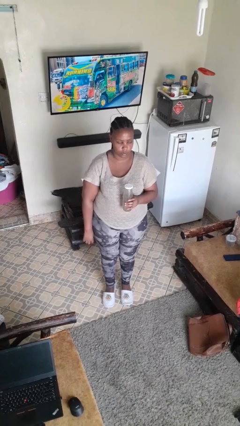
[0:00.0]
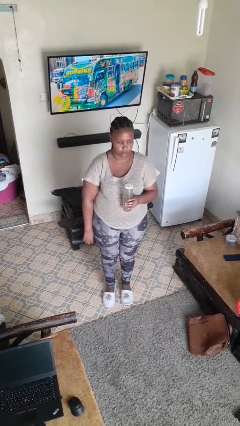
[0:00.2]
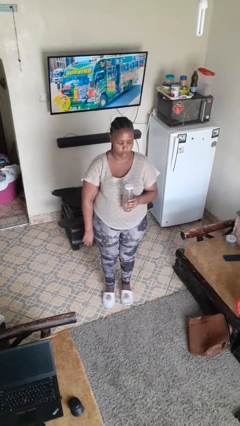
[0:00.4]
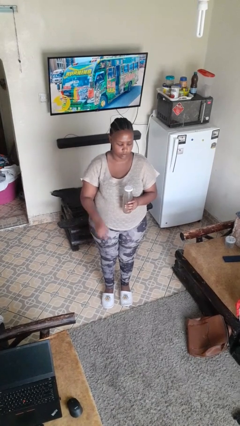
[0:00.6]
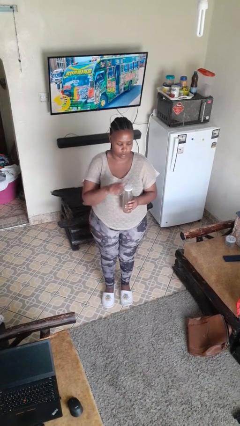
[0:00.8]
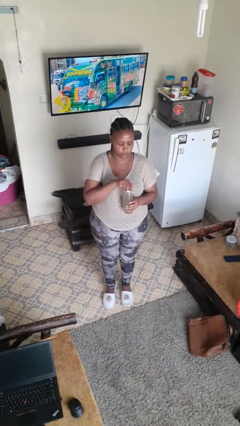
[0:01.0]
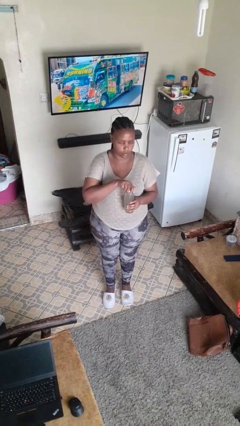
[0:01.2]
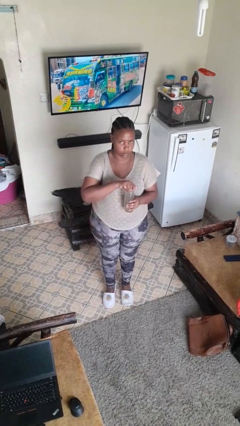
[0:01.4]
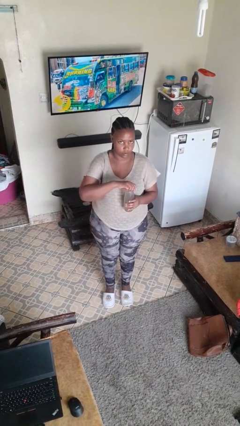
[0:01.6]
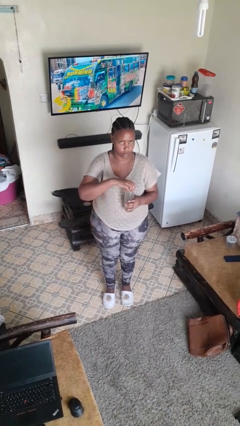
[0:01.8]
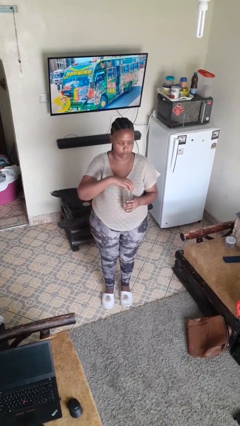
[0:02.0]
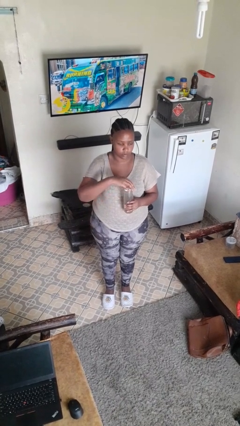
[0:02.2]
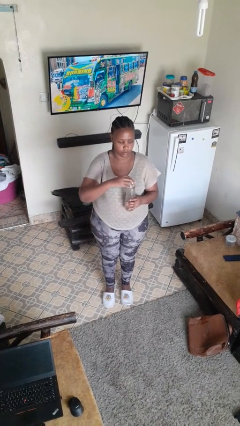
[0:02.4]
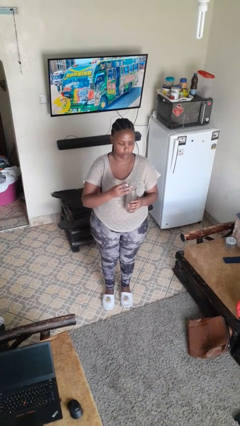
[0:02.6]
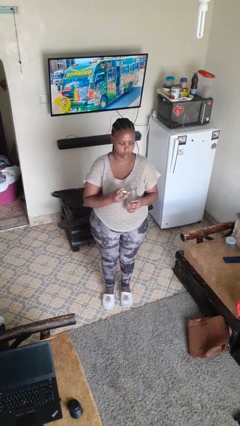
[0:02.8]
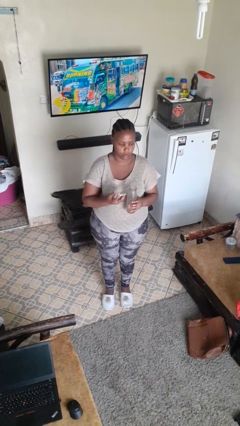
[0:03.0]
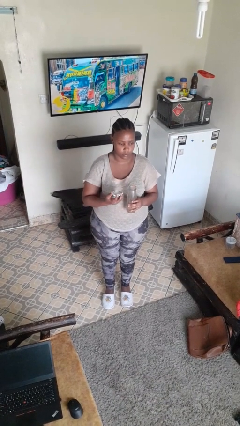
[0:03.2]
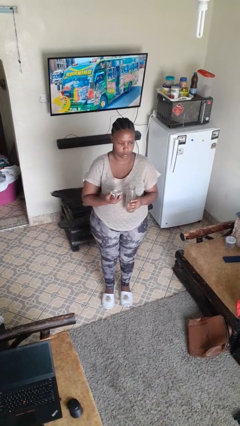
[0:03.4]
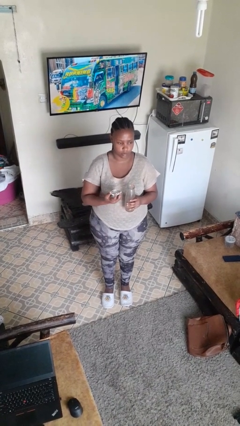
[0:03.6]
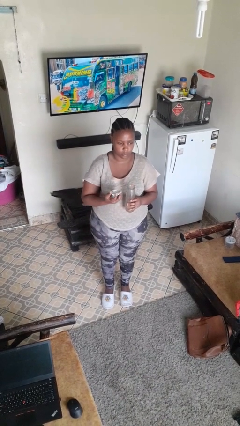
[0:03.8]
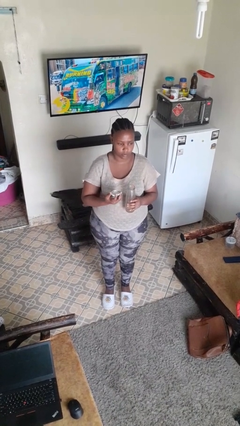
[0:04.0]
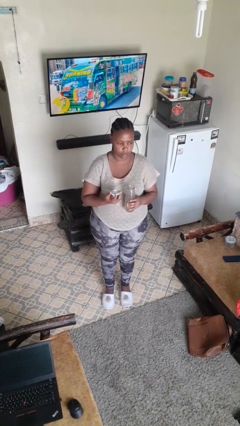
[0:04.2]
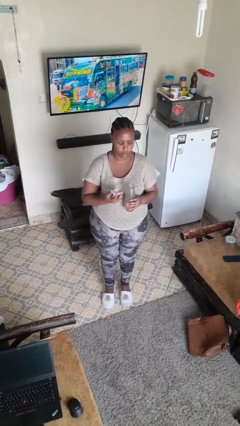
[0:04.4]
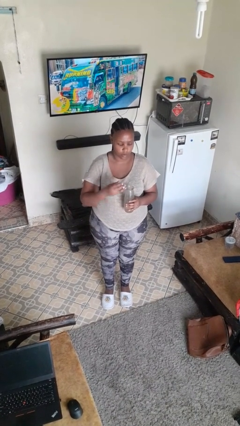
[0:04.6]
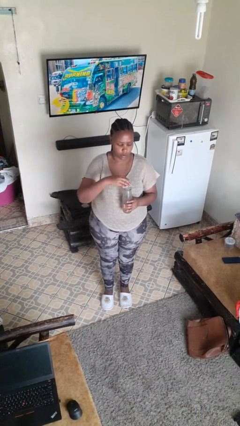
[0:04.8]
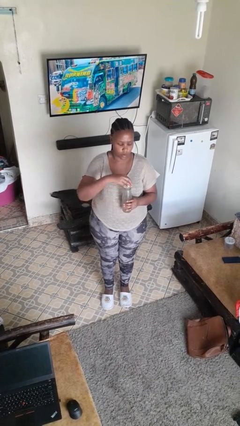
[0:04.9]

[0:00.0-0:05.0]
person unscrews lid from bottle

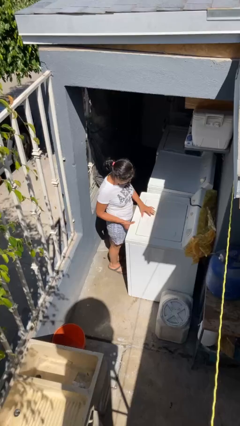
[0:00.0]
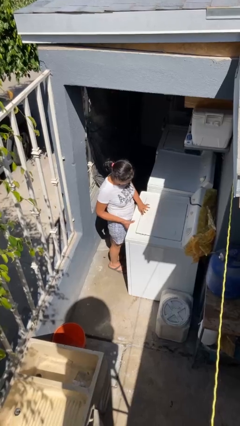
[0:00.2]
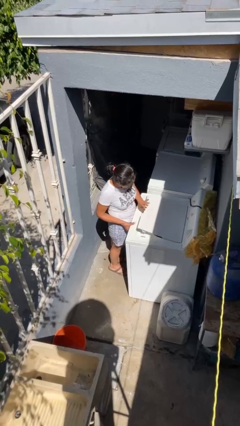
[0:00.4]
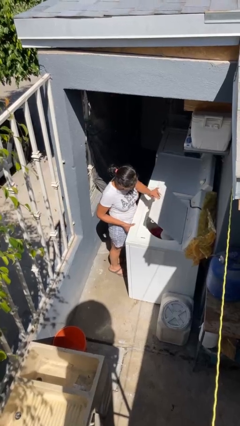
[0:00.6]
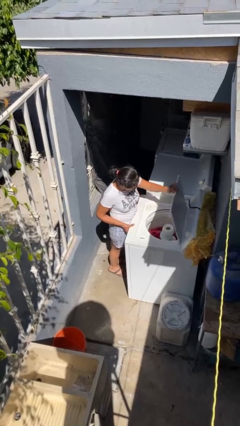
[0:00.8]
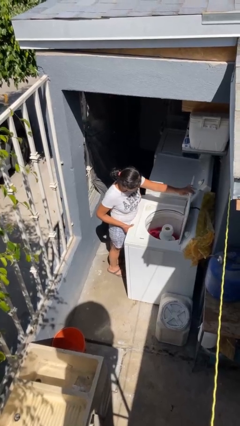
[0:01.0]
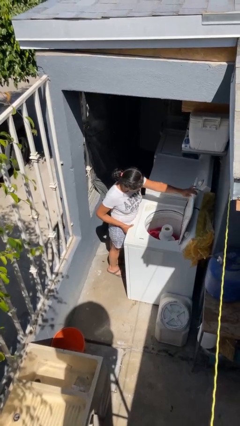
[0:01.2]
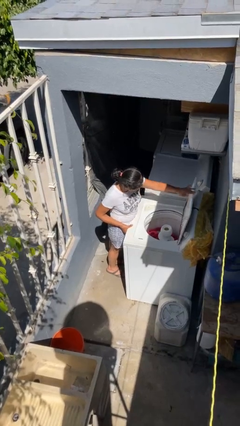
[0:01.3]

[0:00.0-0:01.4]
person opens clothes washer

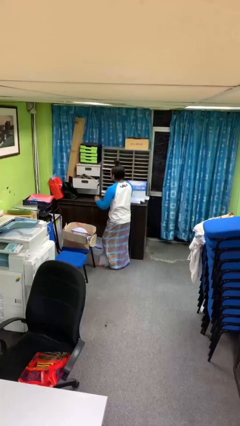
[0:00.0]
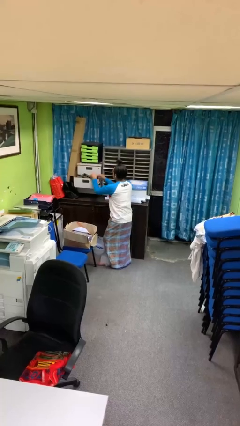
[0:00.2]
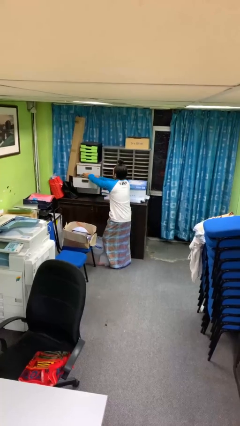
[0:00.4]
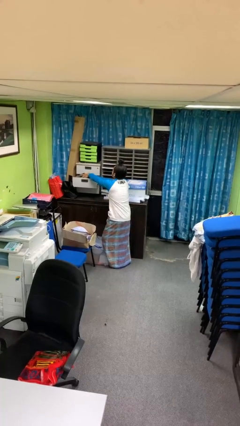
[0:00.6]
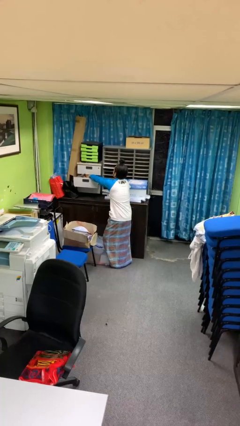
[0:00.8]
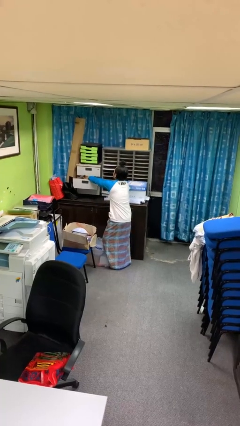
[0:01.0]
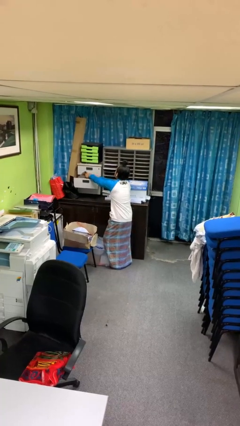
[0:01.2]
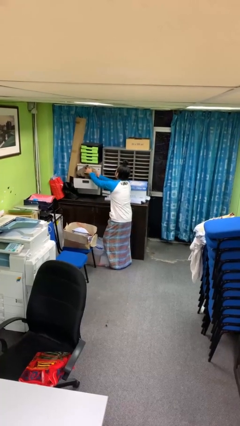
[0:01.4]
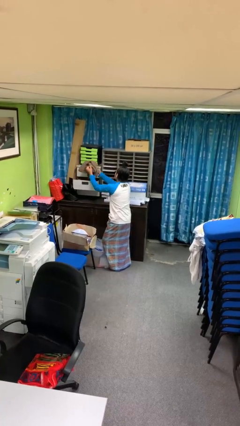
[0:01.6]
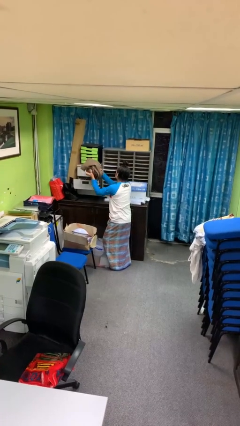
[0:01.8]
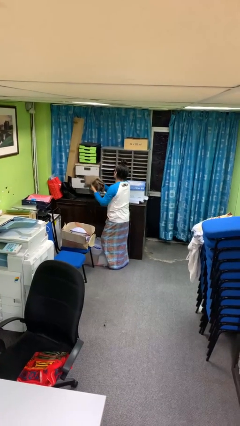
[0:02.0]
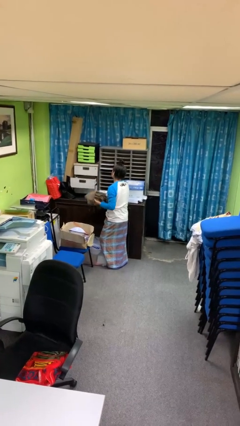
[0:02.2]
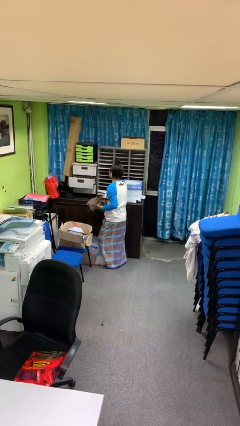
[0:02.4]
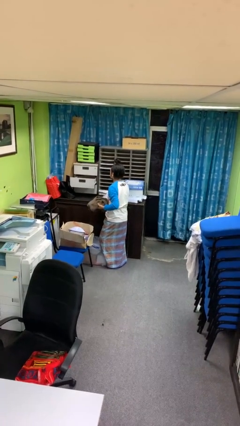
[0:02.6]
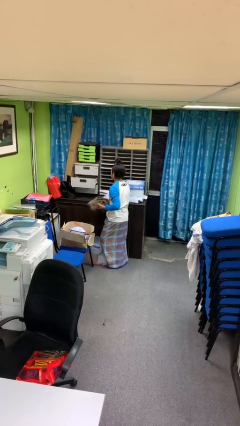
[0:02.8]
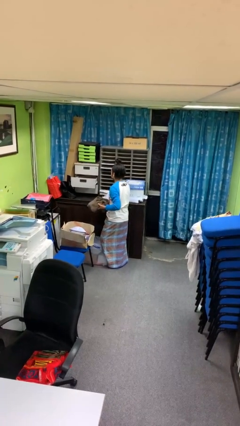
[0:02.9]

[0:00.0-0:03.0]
person takes clothes from dresser

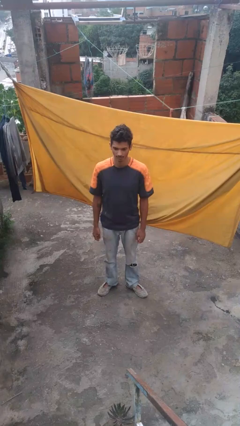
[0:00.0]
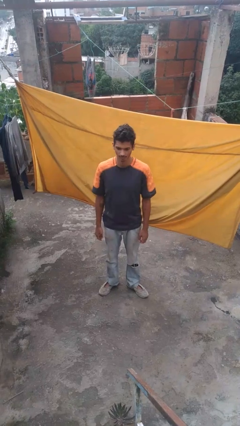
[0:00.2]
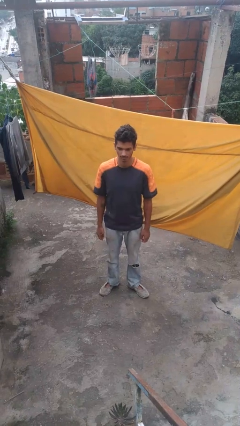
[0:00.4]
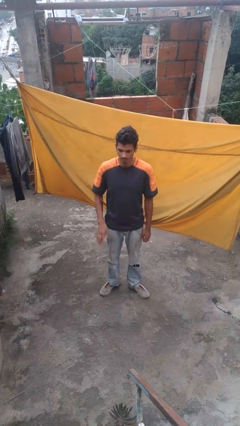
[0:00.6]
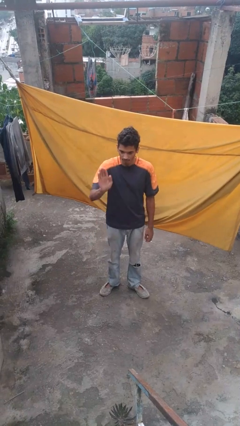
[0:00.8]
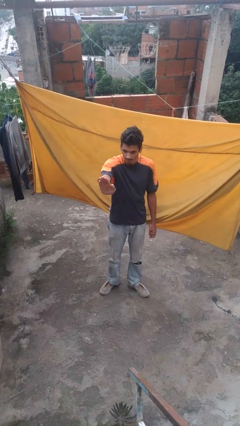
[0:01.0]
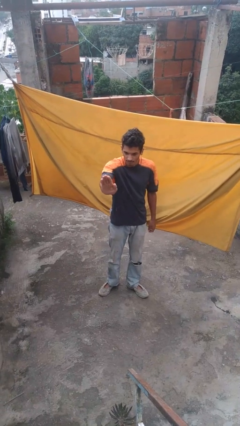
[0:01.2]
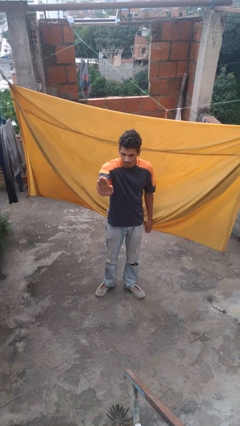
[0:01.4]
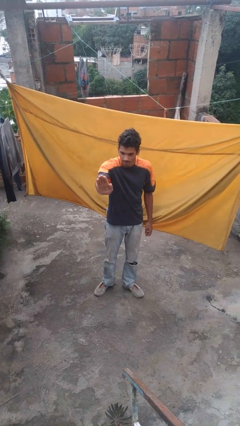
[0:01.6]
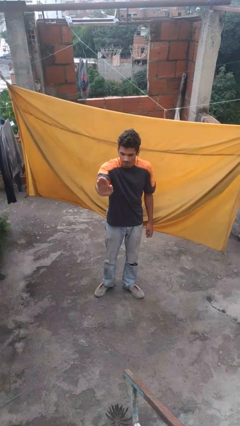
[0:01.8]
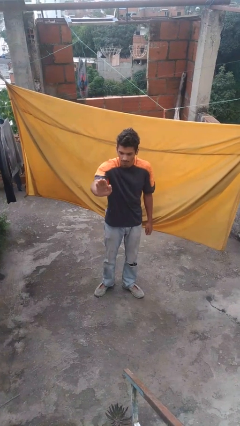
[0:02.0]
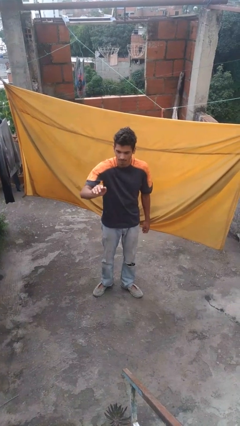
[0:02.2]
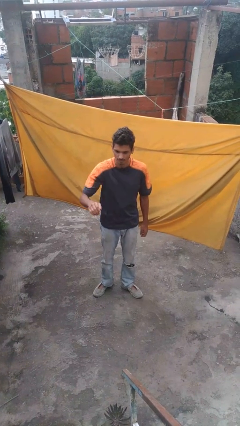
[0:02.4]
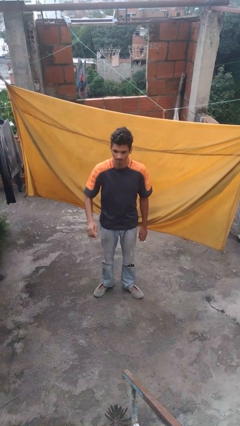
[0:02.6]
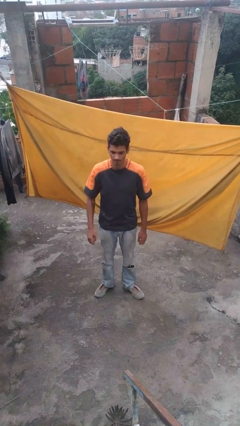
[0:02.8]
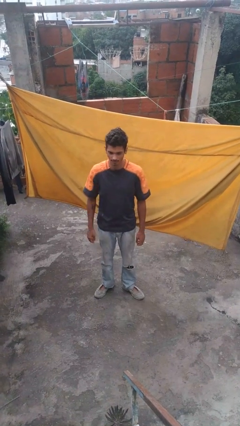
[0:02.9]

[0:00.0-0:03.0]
person gestures stop

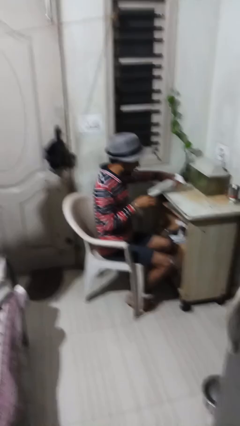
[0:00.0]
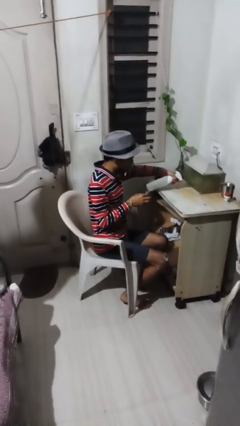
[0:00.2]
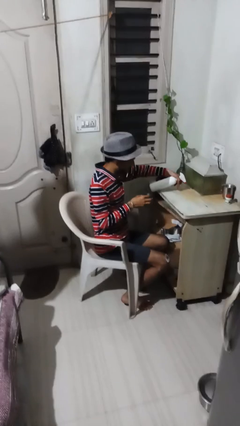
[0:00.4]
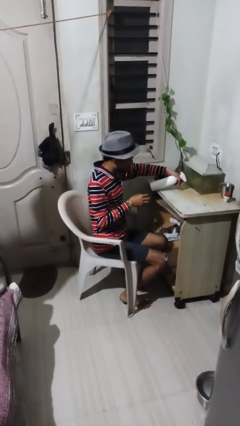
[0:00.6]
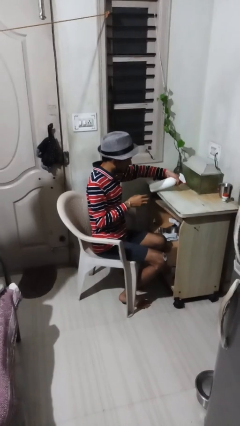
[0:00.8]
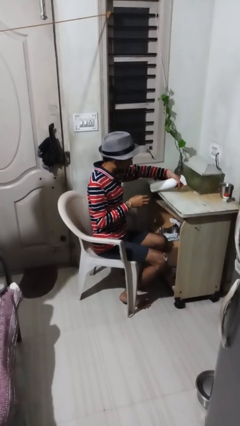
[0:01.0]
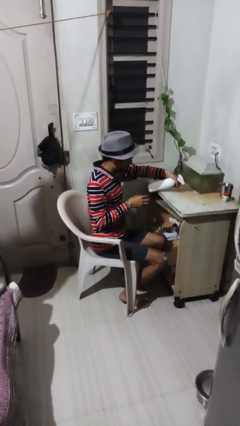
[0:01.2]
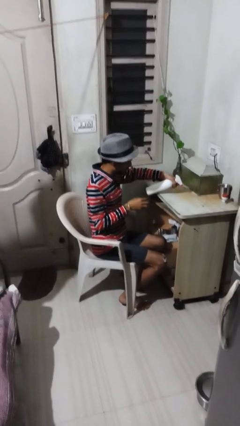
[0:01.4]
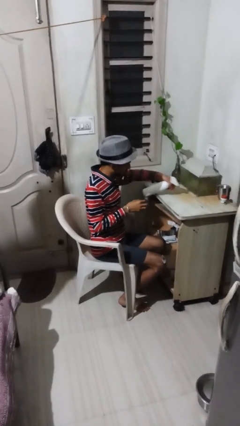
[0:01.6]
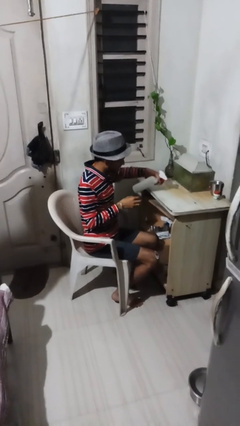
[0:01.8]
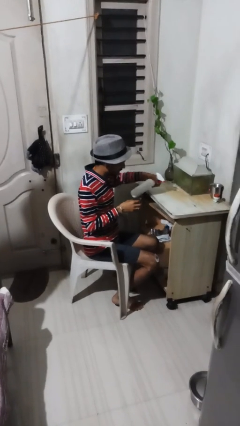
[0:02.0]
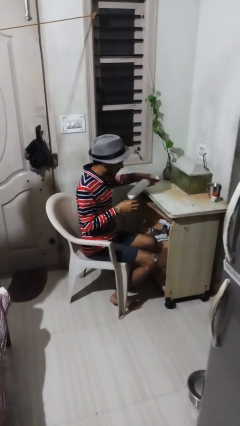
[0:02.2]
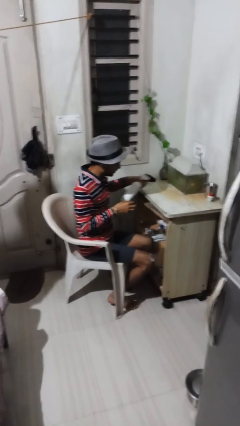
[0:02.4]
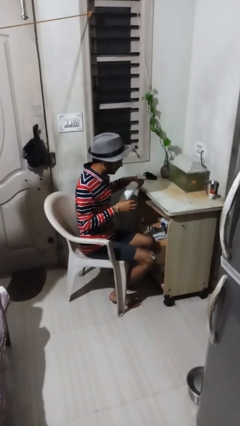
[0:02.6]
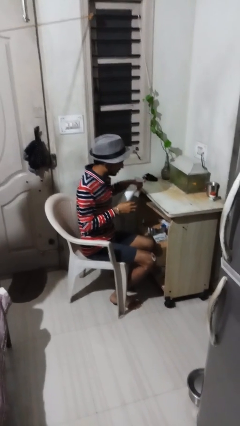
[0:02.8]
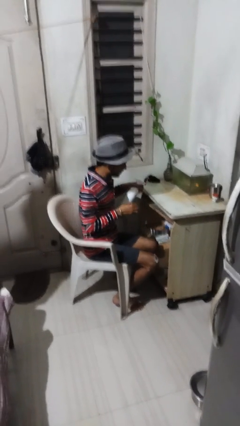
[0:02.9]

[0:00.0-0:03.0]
person sprays from bottle

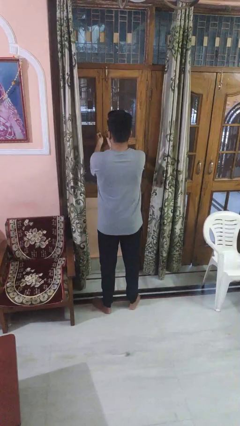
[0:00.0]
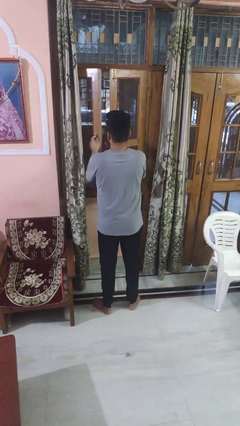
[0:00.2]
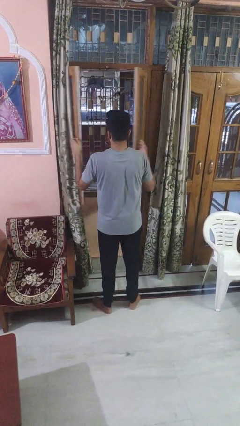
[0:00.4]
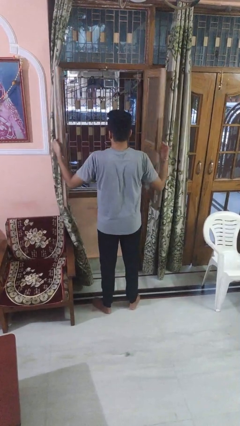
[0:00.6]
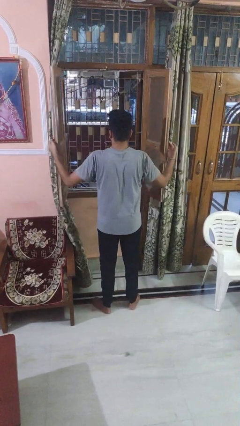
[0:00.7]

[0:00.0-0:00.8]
person opens home window

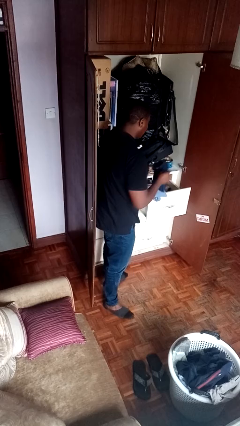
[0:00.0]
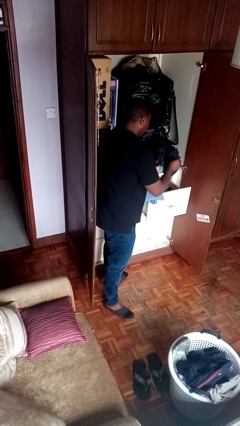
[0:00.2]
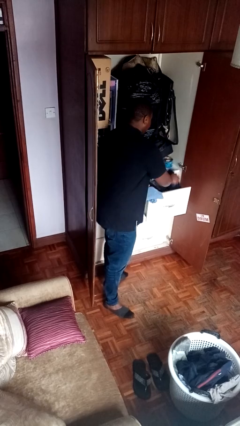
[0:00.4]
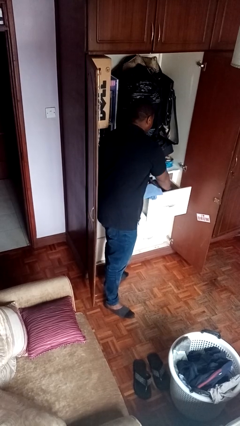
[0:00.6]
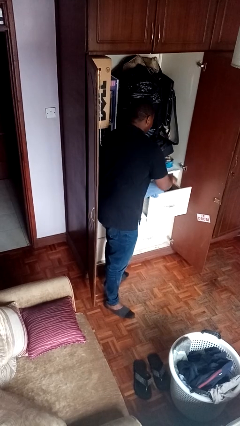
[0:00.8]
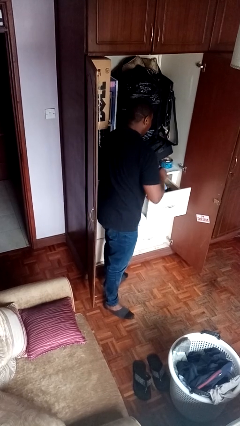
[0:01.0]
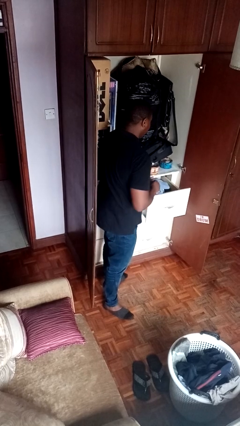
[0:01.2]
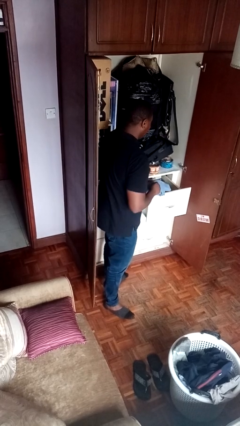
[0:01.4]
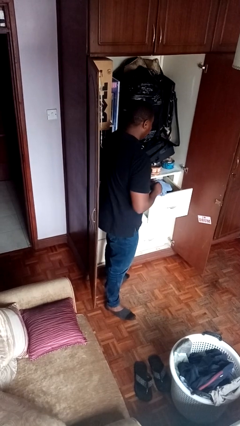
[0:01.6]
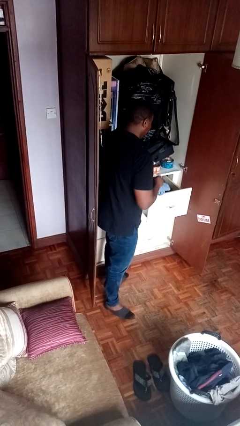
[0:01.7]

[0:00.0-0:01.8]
person puts clothes into dresser
